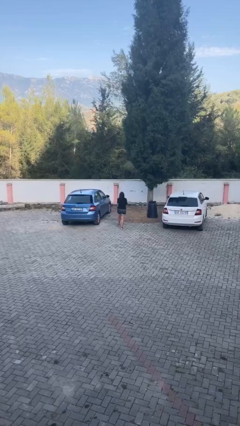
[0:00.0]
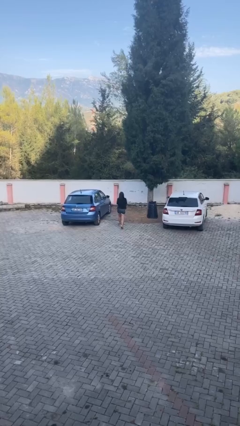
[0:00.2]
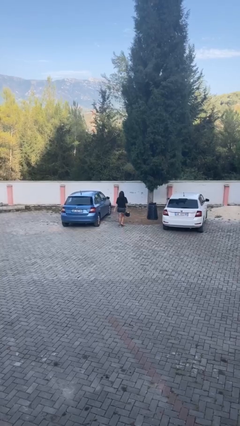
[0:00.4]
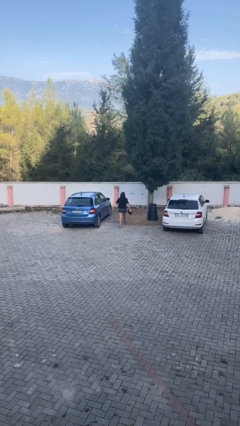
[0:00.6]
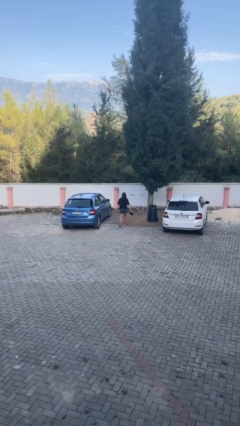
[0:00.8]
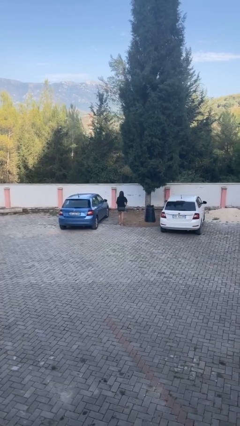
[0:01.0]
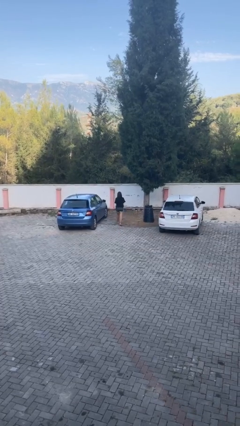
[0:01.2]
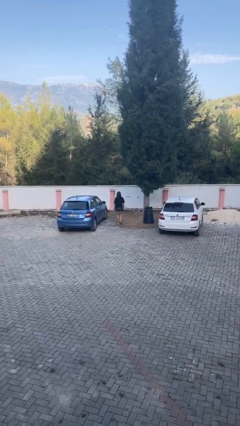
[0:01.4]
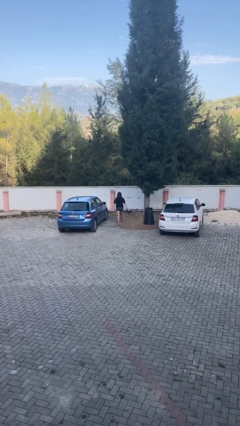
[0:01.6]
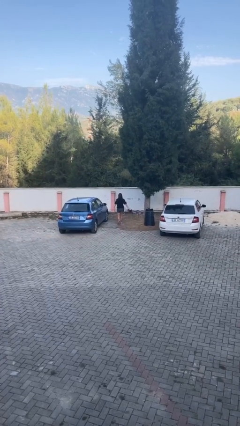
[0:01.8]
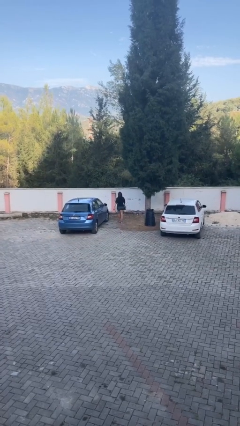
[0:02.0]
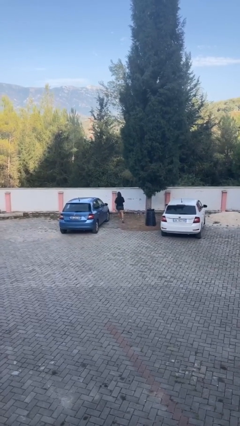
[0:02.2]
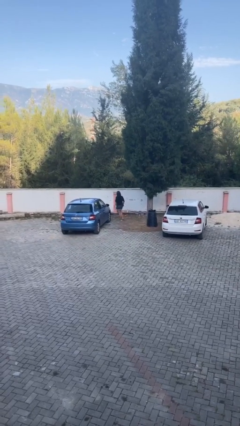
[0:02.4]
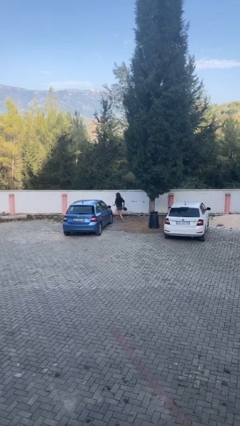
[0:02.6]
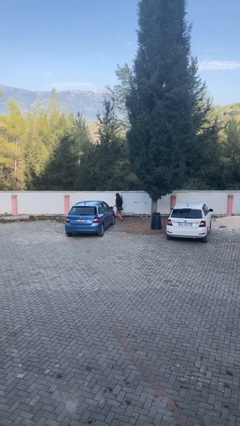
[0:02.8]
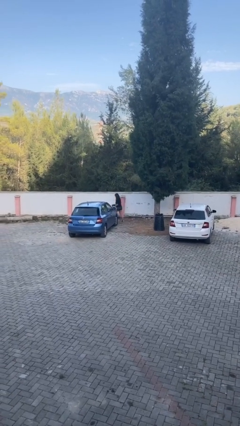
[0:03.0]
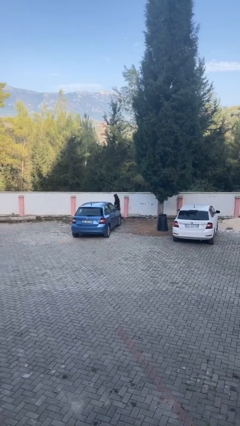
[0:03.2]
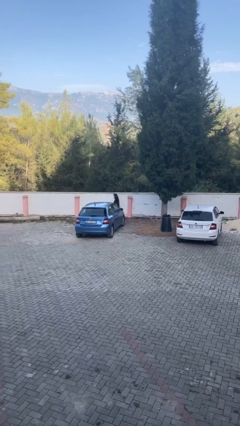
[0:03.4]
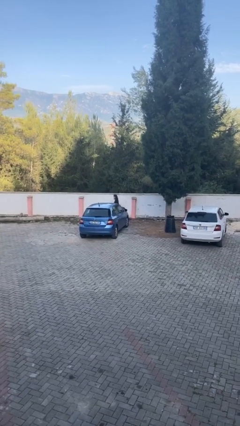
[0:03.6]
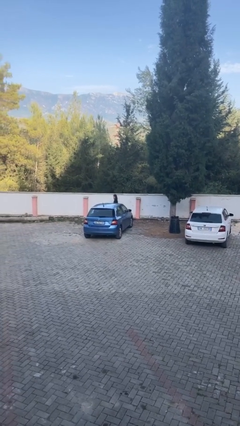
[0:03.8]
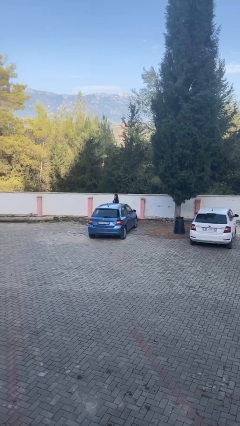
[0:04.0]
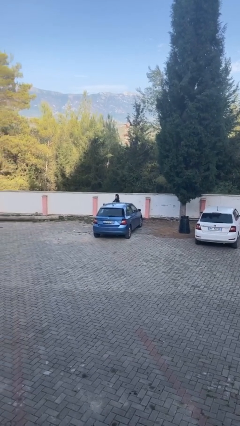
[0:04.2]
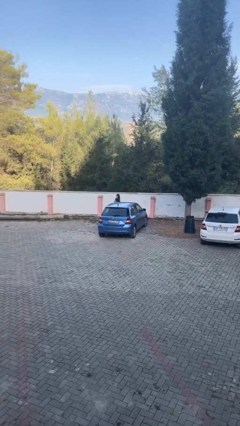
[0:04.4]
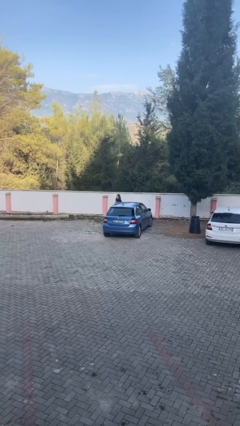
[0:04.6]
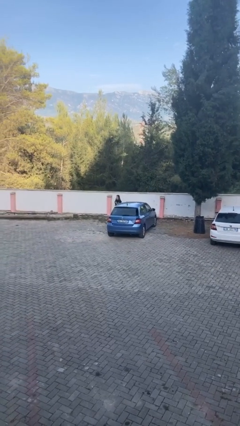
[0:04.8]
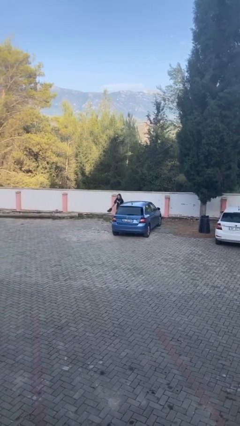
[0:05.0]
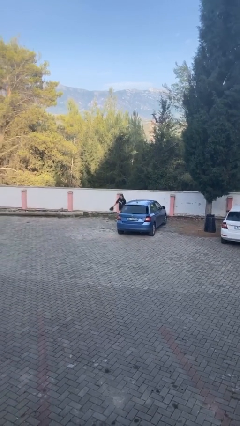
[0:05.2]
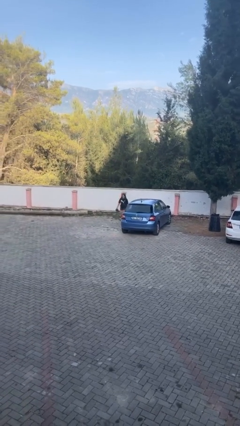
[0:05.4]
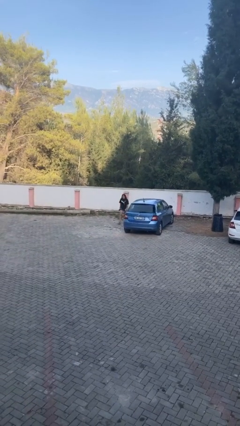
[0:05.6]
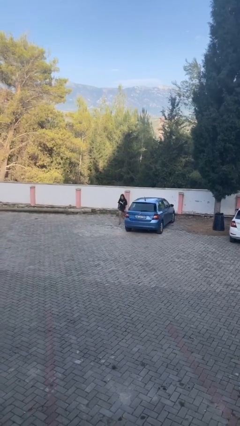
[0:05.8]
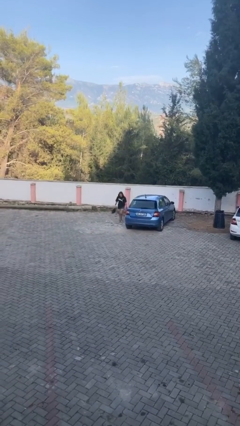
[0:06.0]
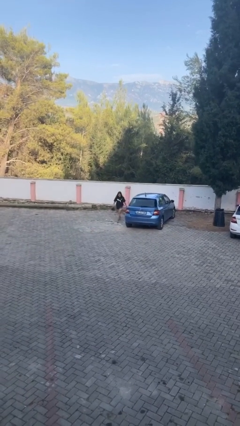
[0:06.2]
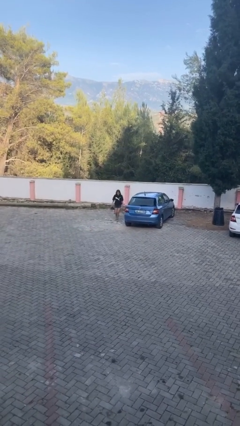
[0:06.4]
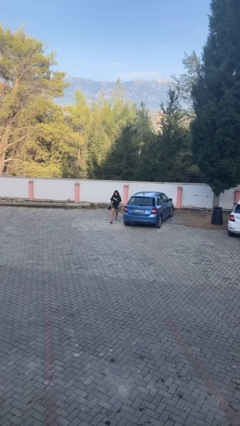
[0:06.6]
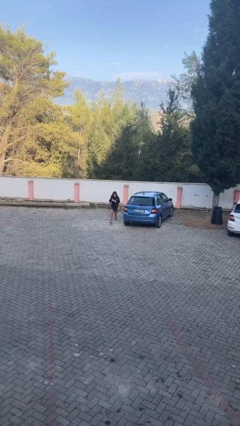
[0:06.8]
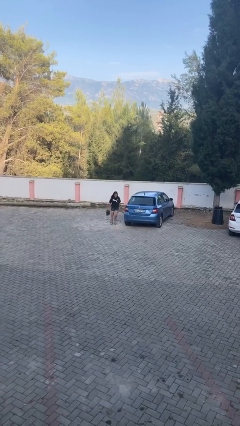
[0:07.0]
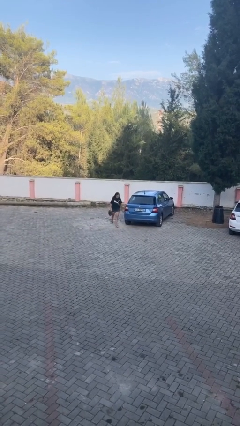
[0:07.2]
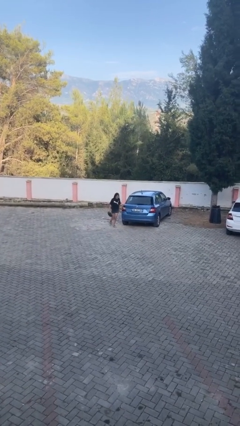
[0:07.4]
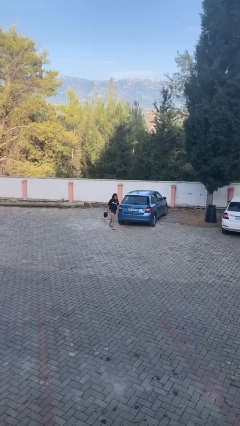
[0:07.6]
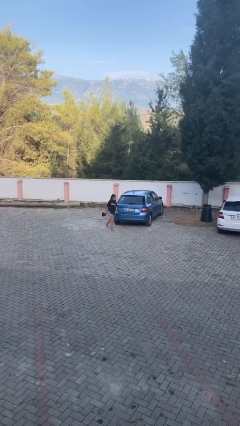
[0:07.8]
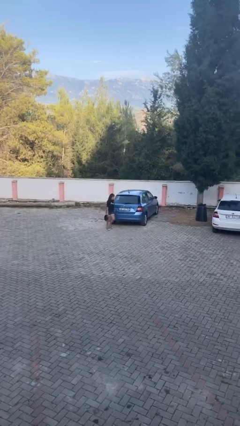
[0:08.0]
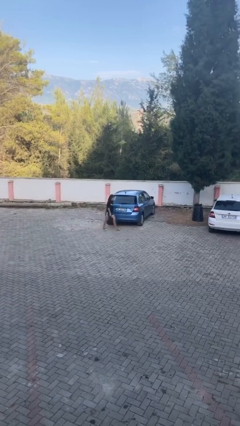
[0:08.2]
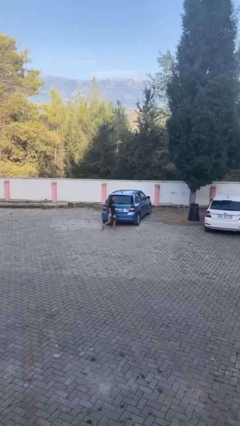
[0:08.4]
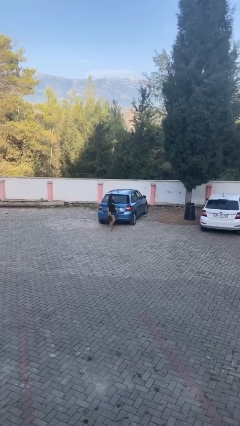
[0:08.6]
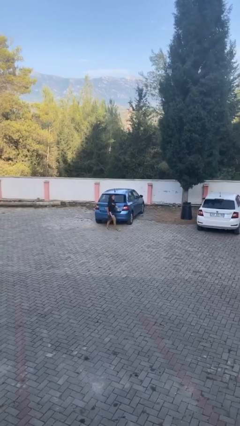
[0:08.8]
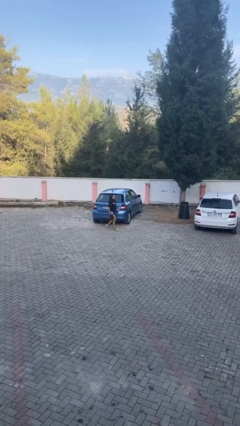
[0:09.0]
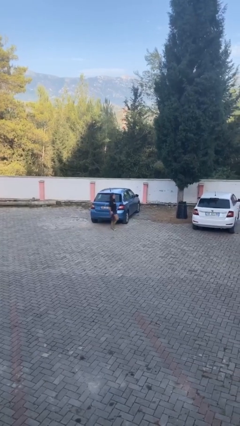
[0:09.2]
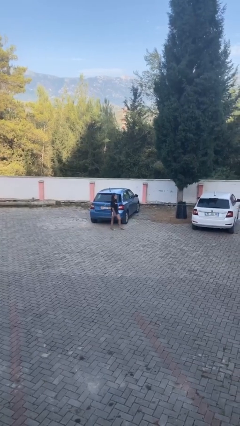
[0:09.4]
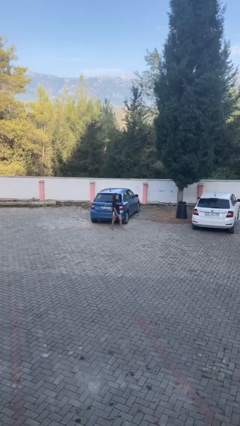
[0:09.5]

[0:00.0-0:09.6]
person walks around car

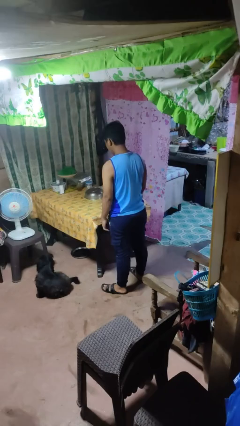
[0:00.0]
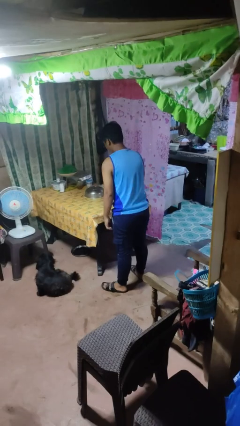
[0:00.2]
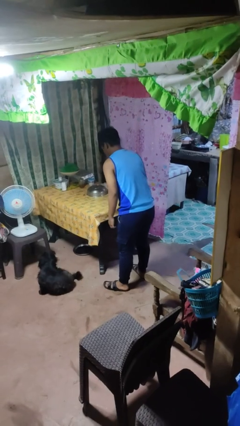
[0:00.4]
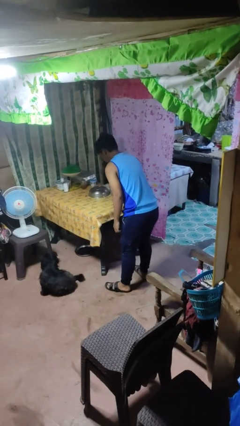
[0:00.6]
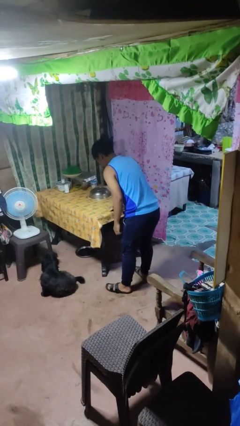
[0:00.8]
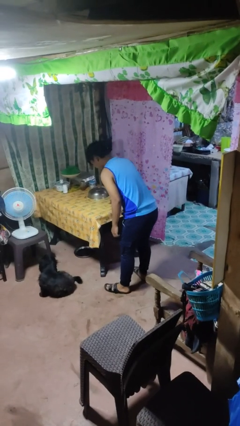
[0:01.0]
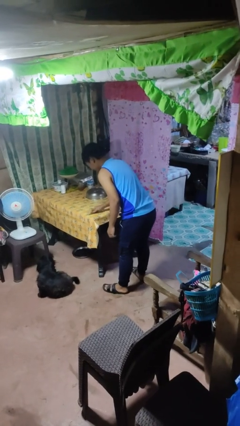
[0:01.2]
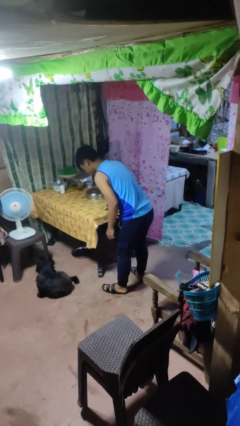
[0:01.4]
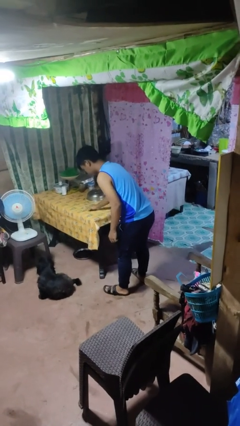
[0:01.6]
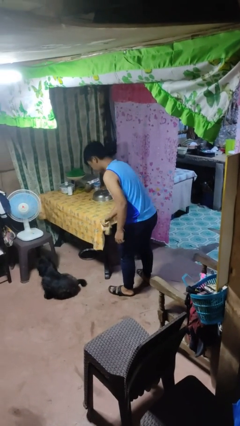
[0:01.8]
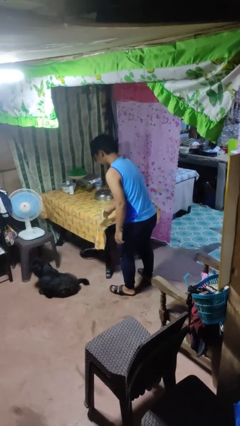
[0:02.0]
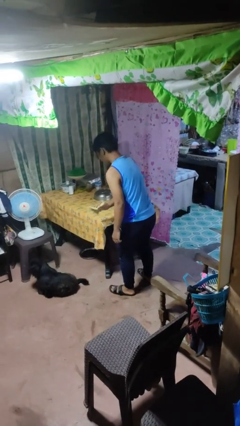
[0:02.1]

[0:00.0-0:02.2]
person cleans table with rag

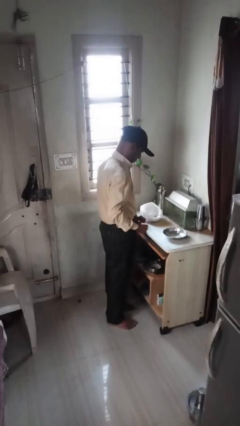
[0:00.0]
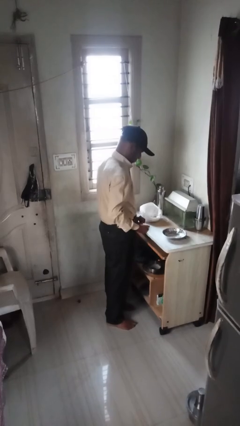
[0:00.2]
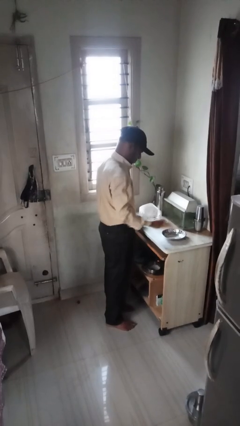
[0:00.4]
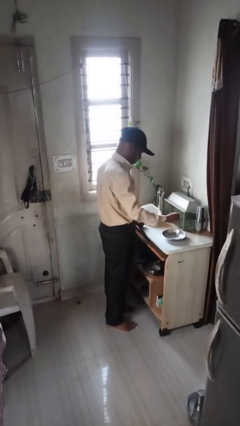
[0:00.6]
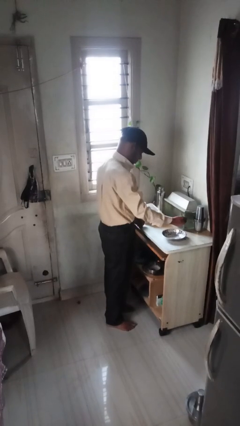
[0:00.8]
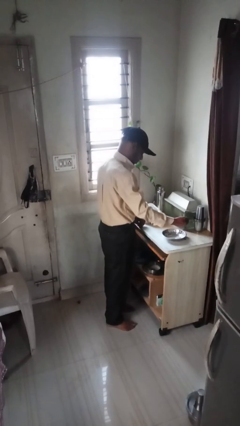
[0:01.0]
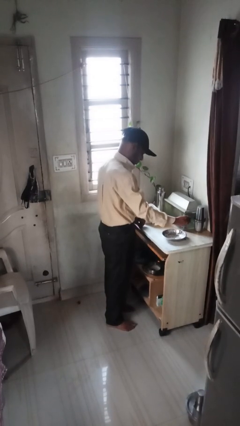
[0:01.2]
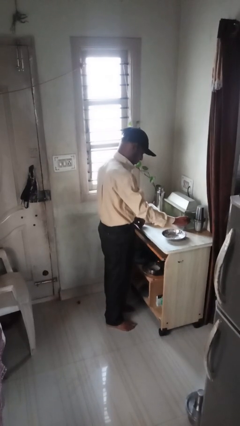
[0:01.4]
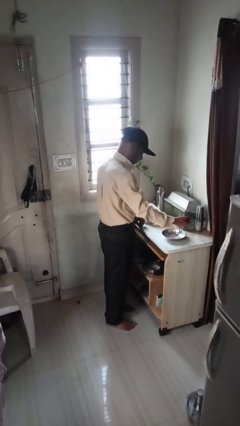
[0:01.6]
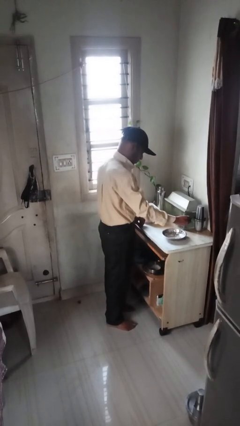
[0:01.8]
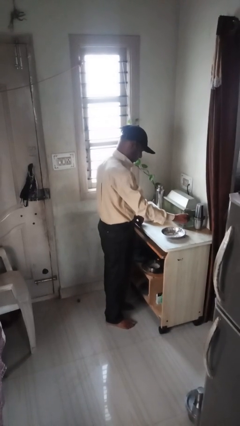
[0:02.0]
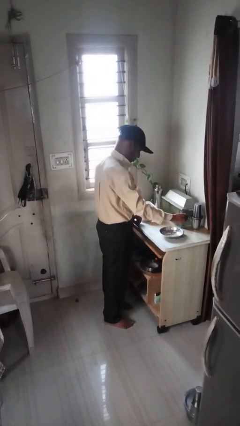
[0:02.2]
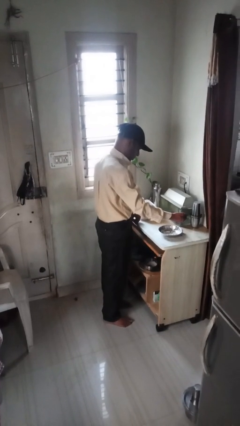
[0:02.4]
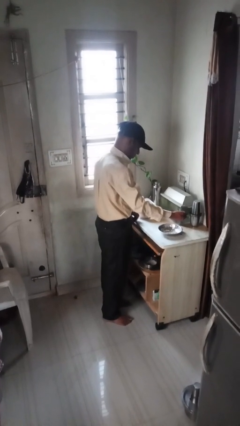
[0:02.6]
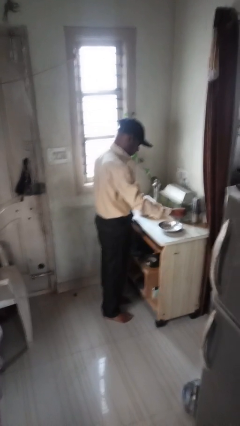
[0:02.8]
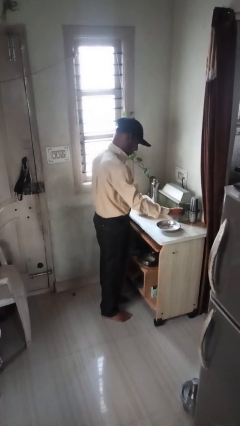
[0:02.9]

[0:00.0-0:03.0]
person pours into bowl

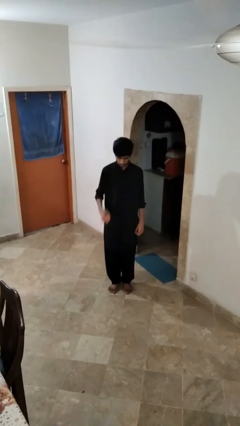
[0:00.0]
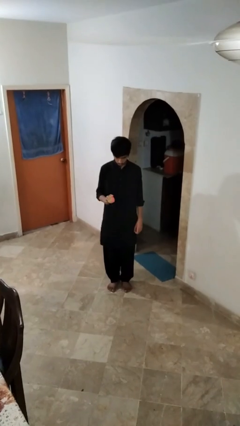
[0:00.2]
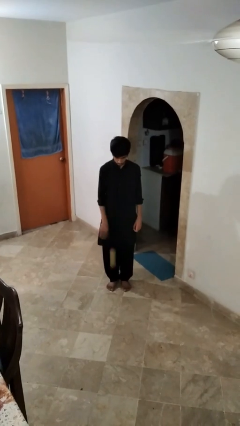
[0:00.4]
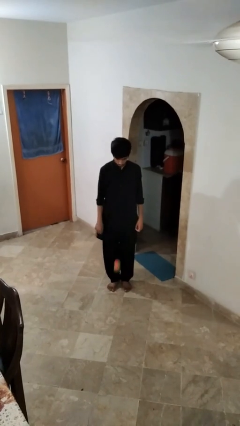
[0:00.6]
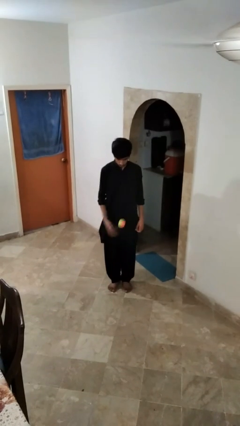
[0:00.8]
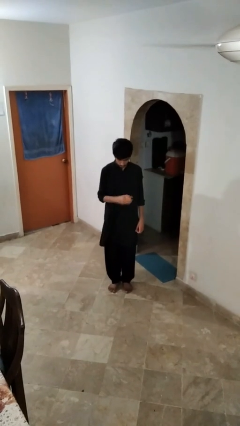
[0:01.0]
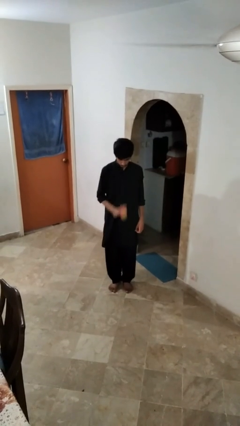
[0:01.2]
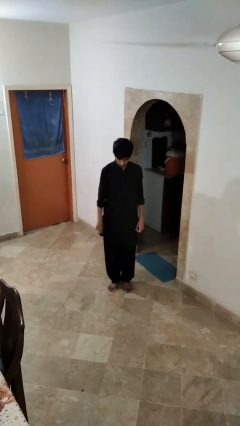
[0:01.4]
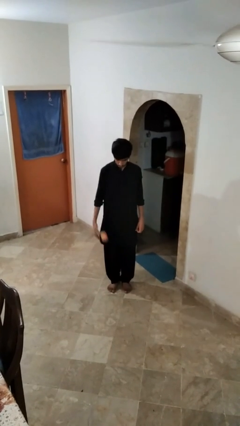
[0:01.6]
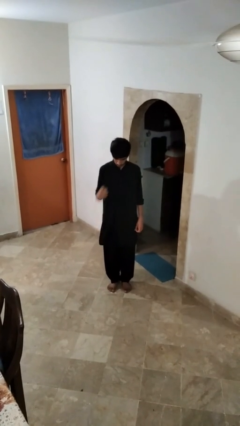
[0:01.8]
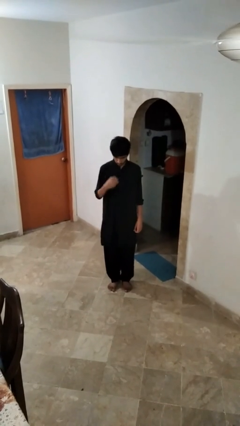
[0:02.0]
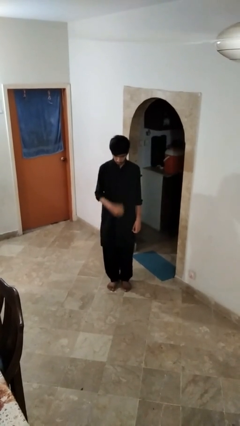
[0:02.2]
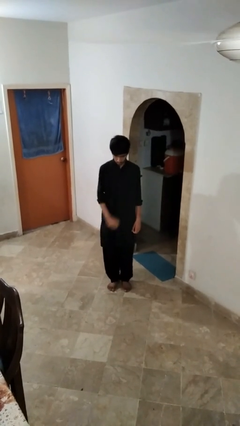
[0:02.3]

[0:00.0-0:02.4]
person bounces ball on floor
